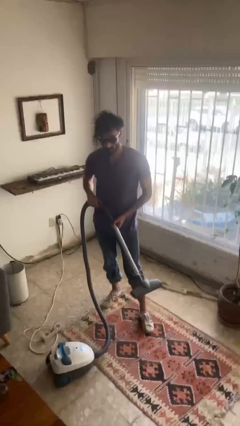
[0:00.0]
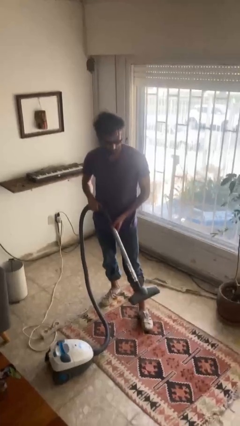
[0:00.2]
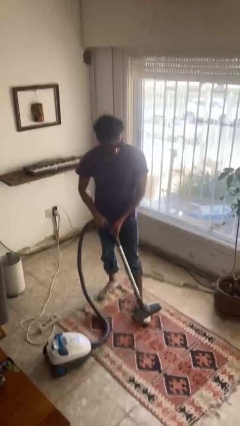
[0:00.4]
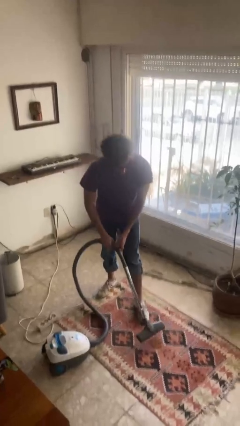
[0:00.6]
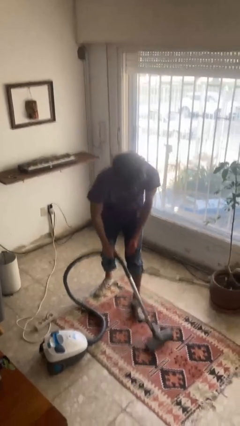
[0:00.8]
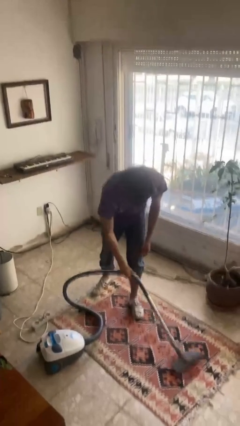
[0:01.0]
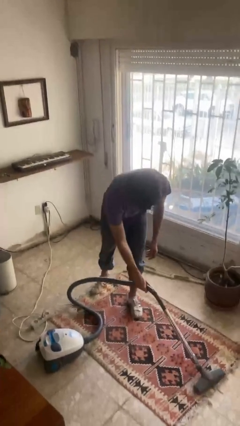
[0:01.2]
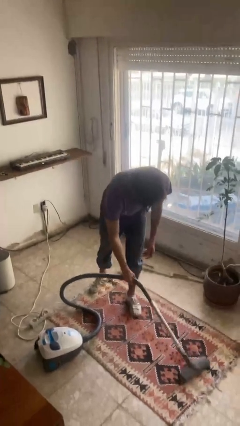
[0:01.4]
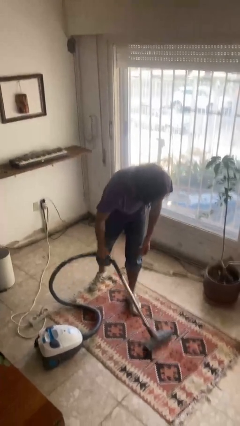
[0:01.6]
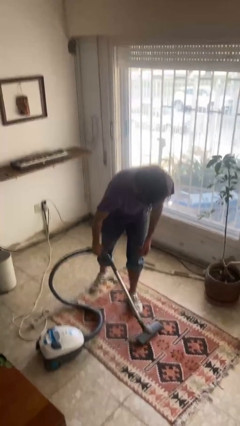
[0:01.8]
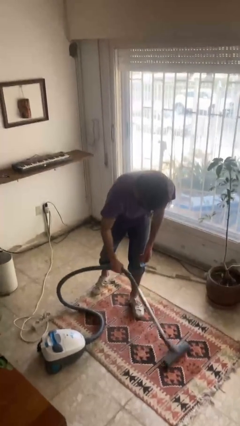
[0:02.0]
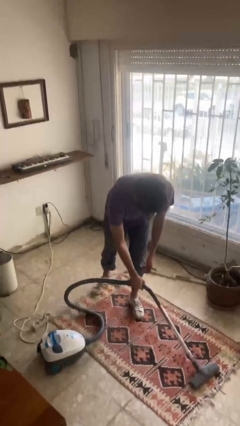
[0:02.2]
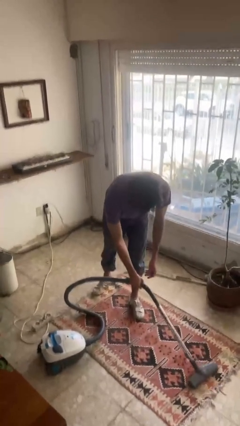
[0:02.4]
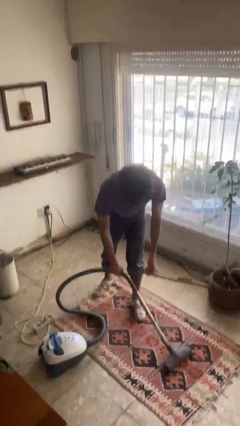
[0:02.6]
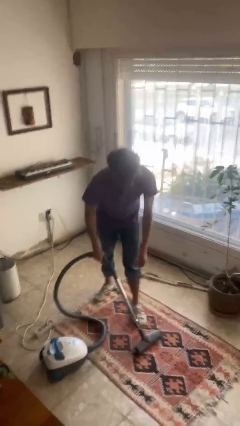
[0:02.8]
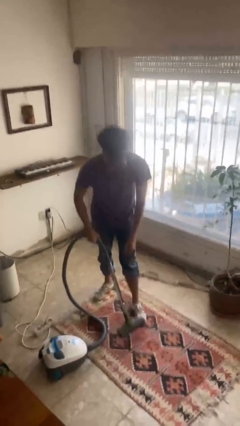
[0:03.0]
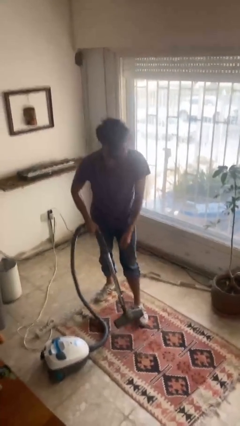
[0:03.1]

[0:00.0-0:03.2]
person vacuums carpet

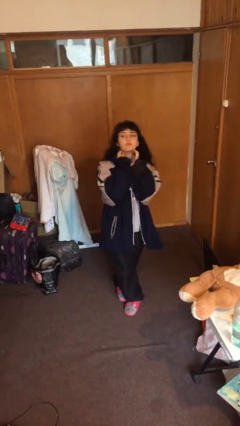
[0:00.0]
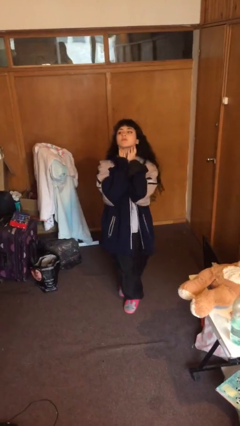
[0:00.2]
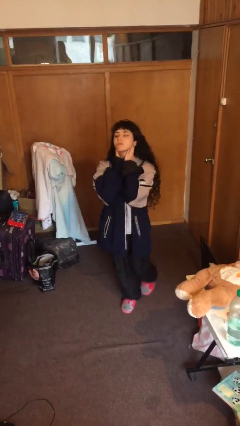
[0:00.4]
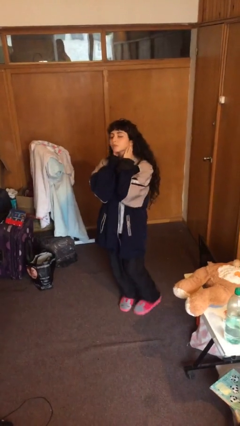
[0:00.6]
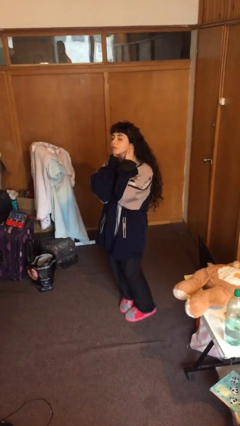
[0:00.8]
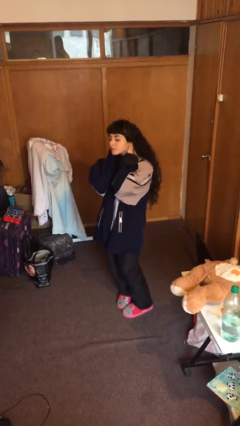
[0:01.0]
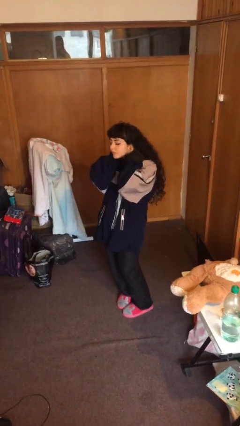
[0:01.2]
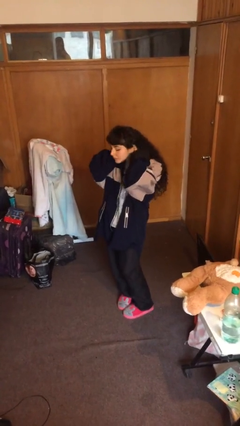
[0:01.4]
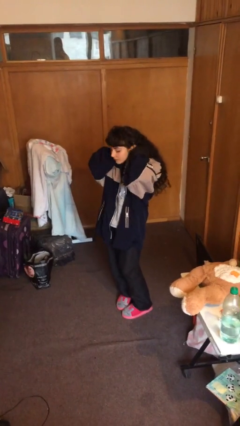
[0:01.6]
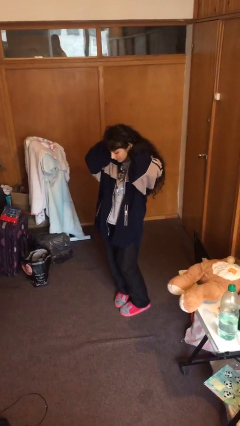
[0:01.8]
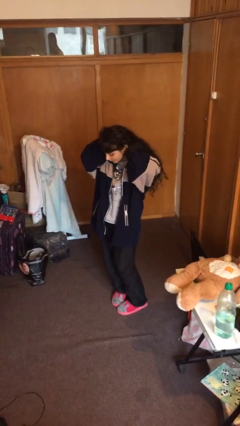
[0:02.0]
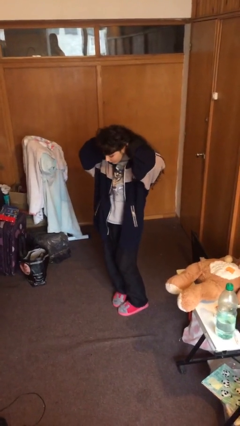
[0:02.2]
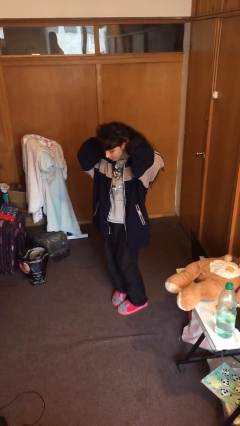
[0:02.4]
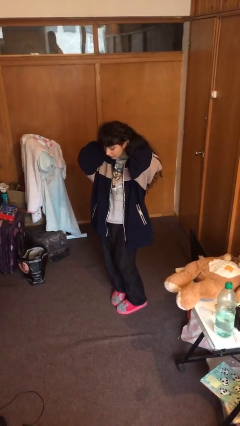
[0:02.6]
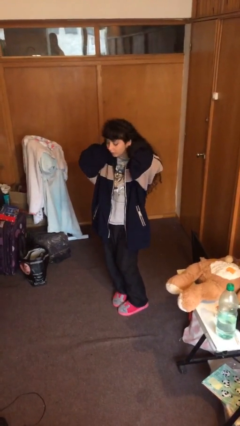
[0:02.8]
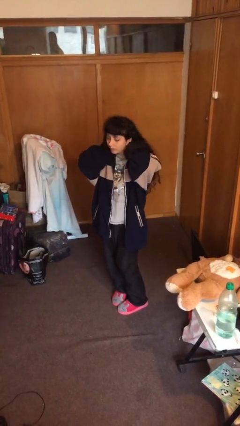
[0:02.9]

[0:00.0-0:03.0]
person rubs neck

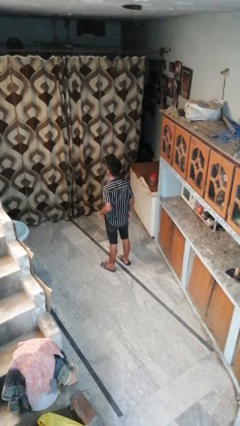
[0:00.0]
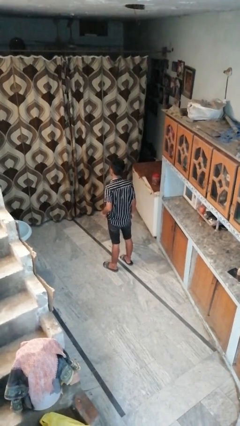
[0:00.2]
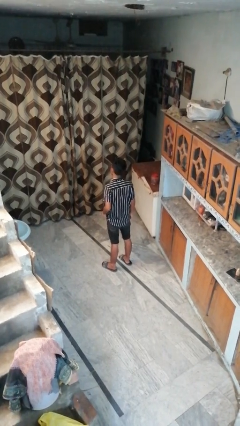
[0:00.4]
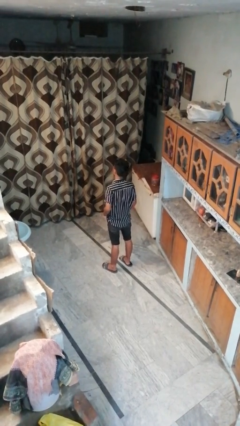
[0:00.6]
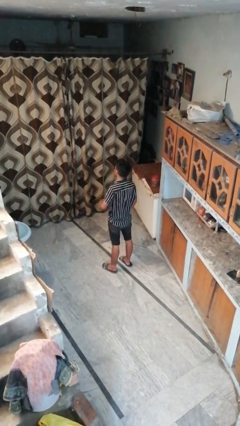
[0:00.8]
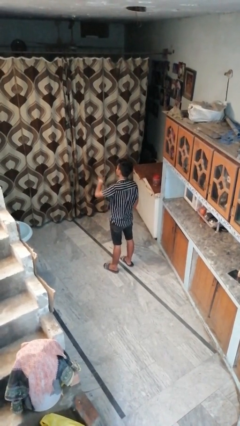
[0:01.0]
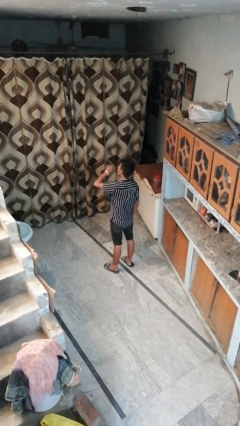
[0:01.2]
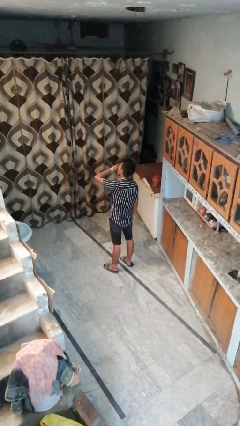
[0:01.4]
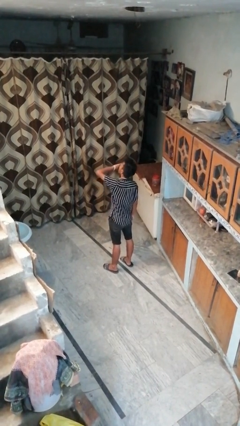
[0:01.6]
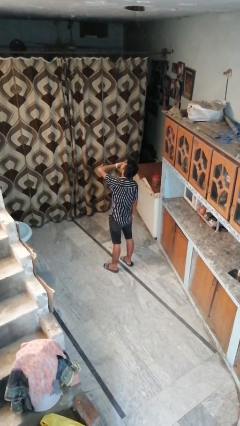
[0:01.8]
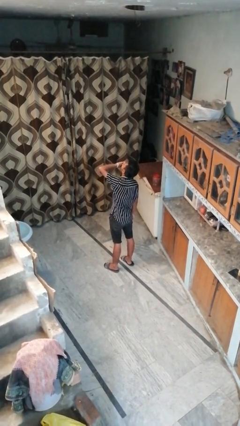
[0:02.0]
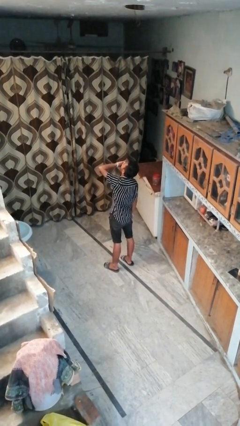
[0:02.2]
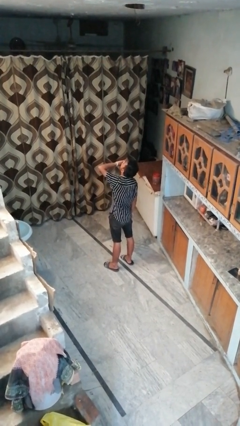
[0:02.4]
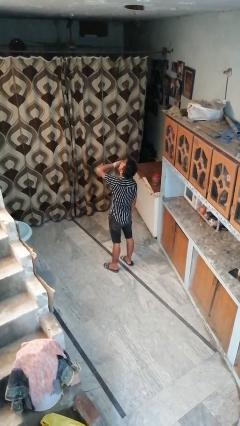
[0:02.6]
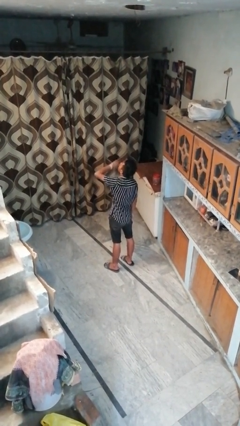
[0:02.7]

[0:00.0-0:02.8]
person yawns

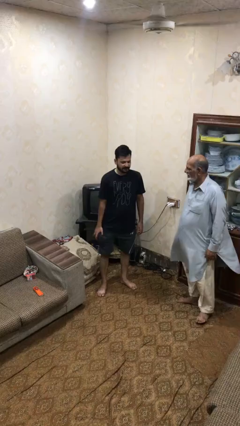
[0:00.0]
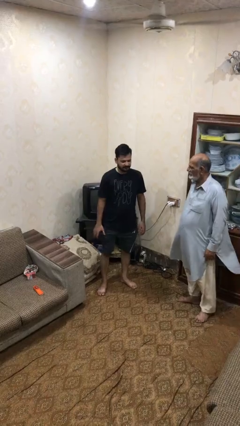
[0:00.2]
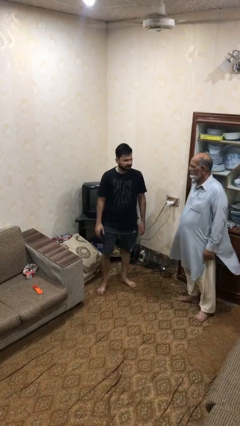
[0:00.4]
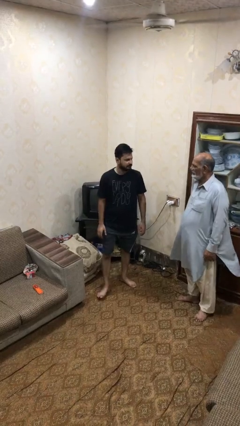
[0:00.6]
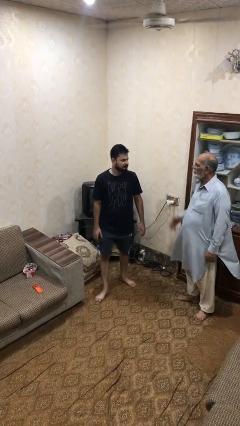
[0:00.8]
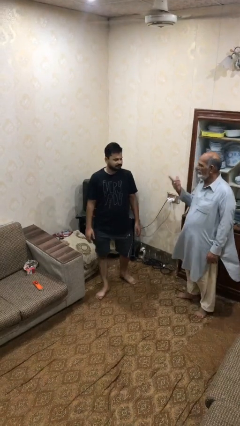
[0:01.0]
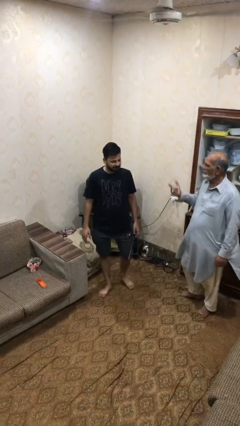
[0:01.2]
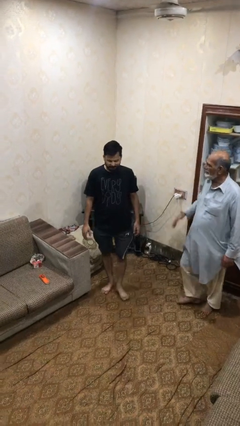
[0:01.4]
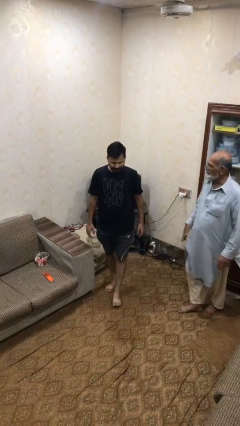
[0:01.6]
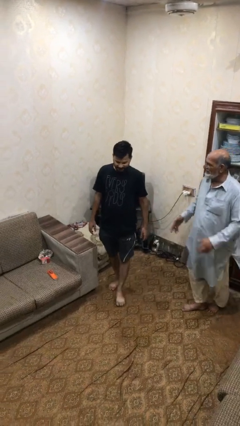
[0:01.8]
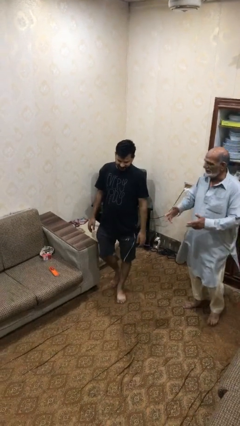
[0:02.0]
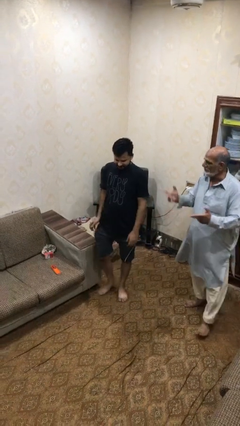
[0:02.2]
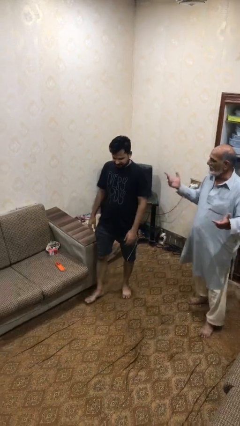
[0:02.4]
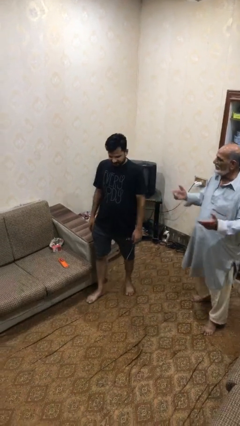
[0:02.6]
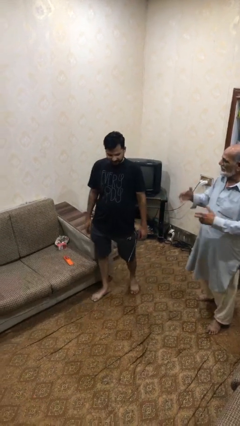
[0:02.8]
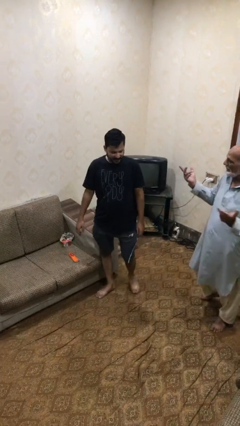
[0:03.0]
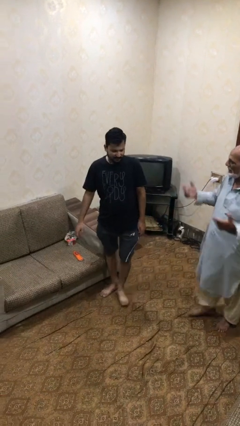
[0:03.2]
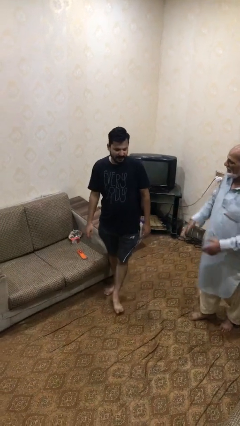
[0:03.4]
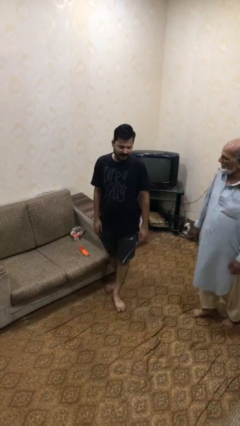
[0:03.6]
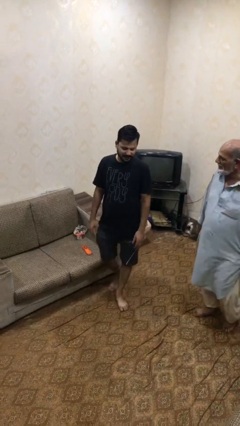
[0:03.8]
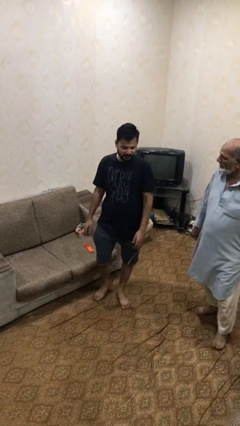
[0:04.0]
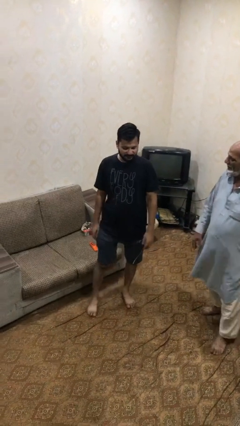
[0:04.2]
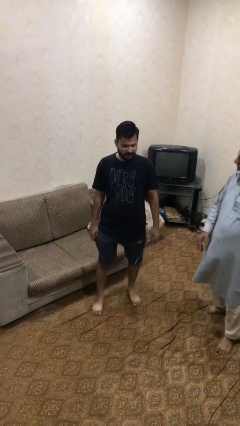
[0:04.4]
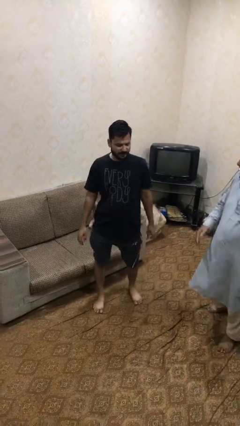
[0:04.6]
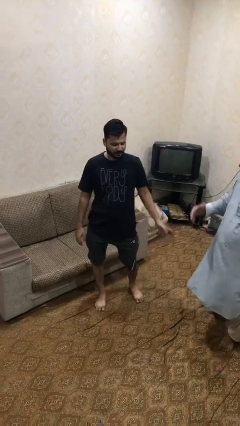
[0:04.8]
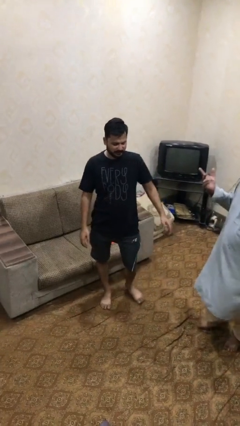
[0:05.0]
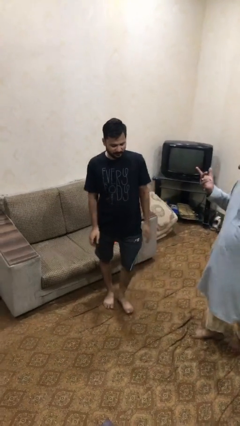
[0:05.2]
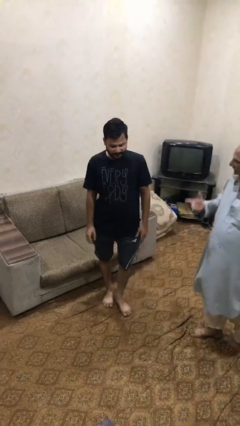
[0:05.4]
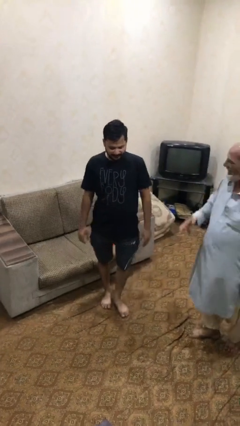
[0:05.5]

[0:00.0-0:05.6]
person talks to person

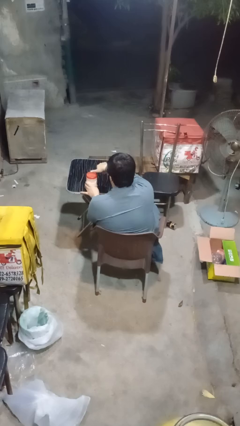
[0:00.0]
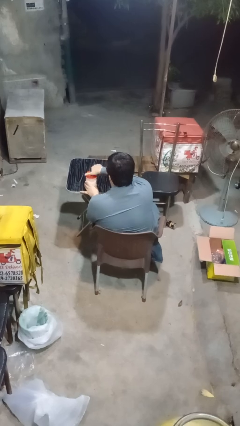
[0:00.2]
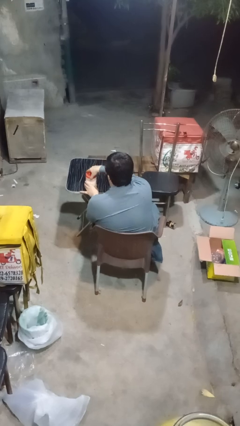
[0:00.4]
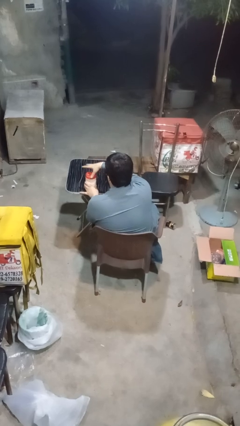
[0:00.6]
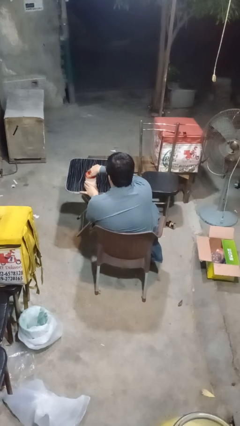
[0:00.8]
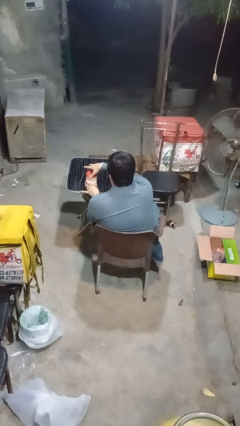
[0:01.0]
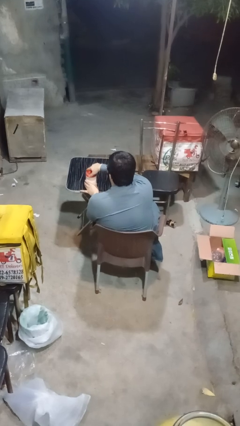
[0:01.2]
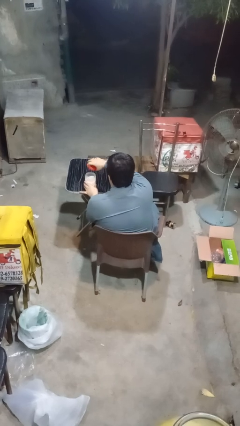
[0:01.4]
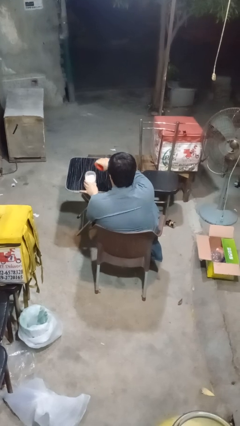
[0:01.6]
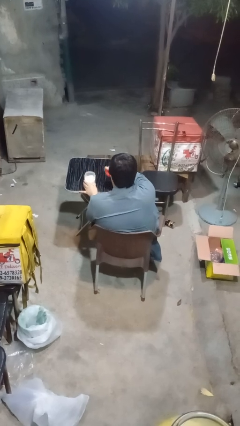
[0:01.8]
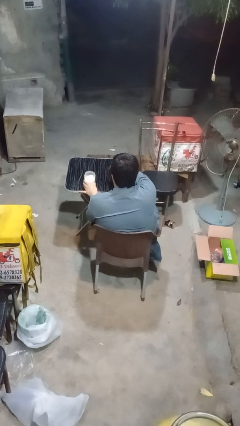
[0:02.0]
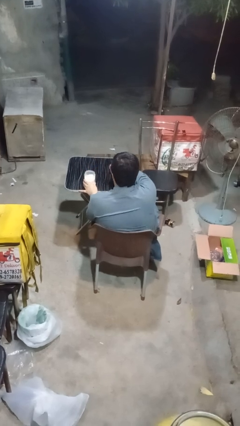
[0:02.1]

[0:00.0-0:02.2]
person opens jar

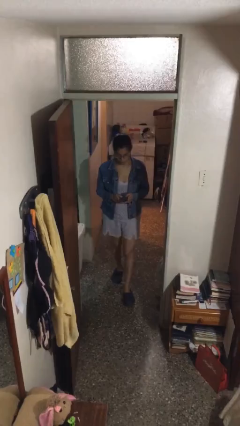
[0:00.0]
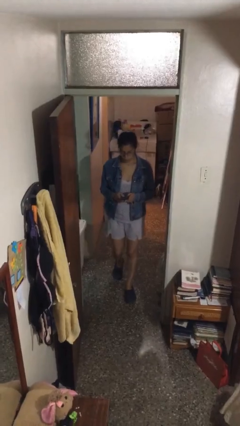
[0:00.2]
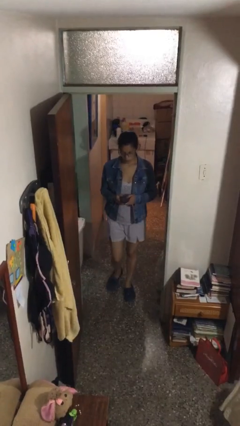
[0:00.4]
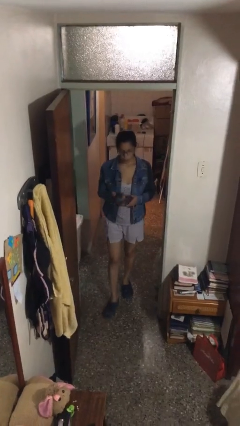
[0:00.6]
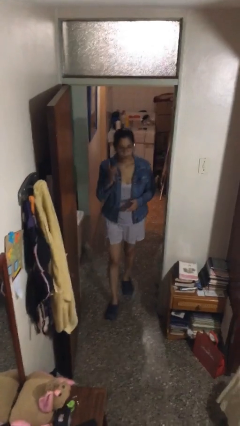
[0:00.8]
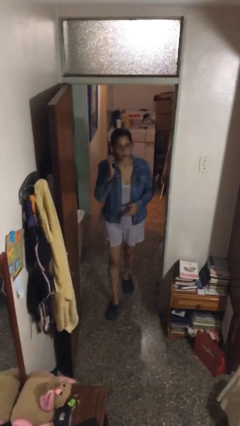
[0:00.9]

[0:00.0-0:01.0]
person talks on phone

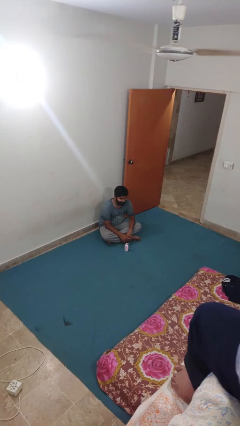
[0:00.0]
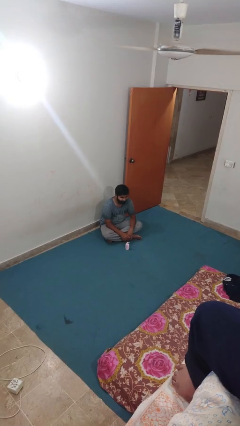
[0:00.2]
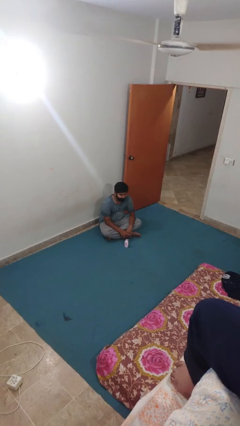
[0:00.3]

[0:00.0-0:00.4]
person applies facial moisturizer
